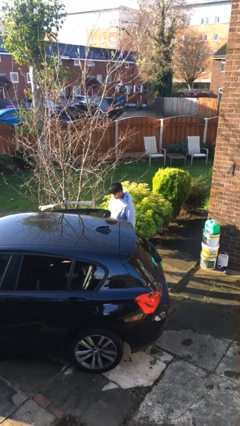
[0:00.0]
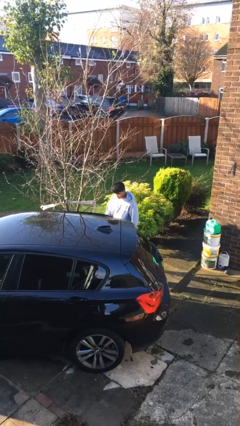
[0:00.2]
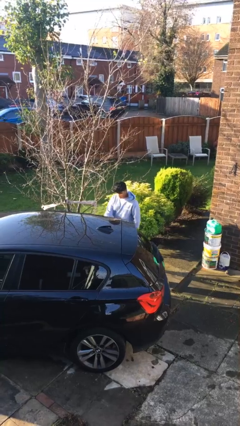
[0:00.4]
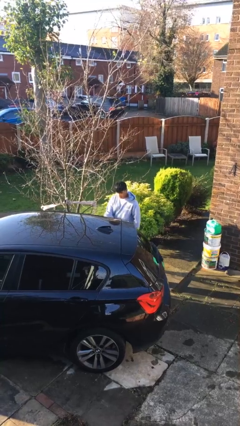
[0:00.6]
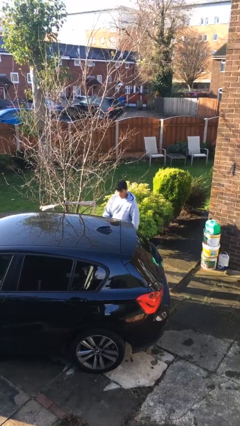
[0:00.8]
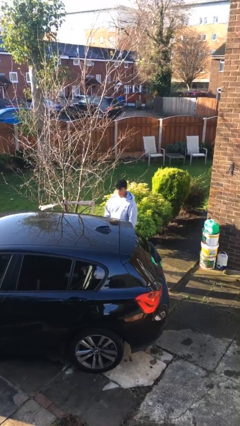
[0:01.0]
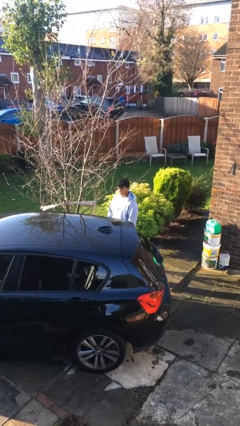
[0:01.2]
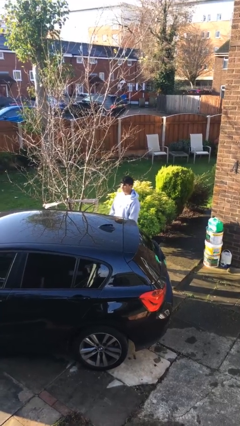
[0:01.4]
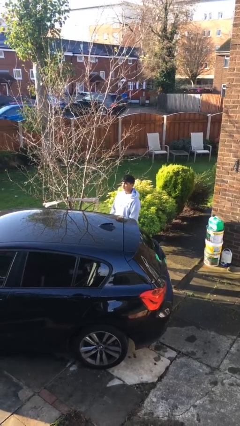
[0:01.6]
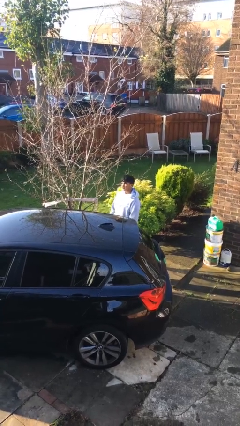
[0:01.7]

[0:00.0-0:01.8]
person closes car door

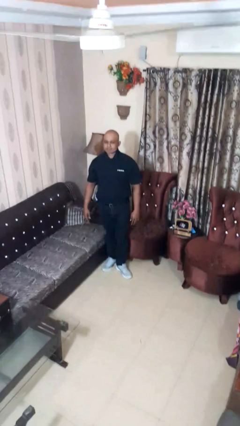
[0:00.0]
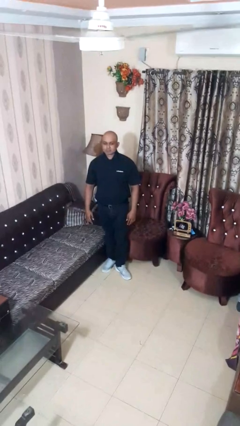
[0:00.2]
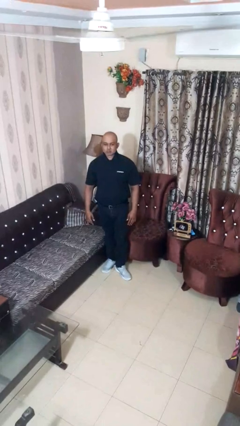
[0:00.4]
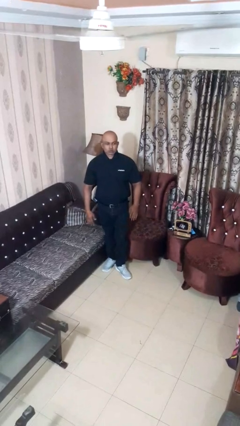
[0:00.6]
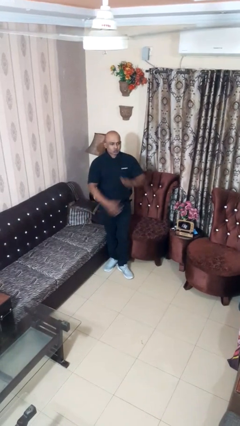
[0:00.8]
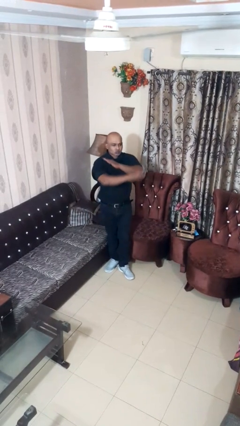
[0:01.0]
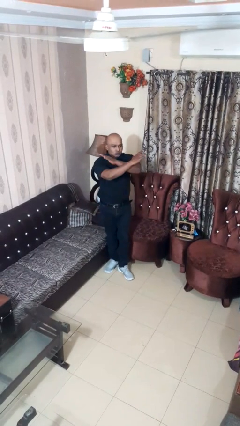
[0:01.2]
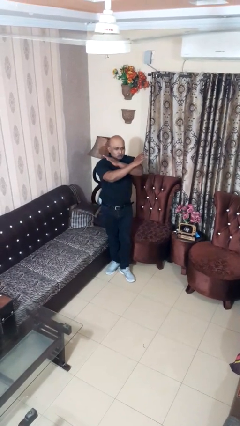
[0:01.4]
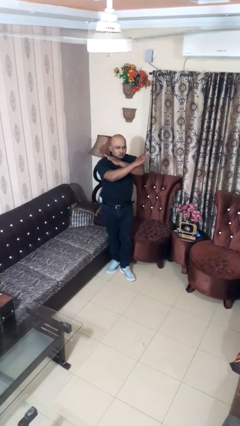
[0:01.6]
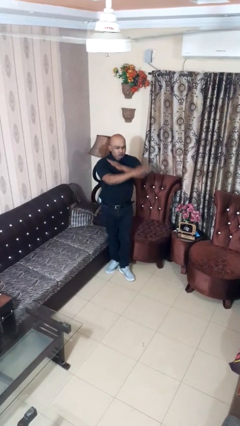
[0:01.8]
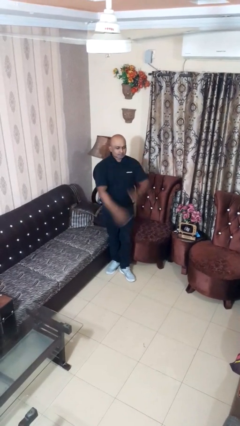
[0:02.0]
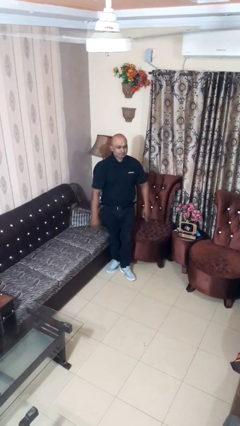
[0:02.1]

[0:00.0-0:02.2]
person gestures arms x

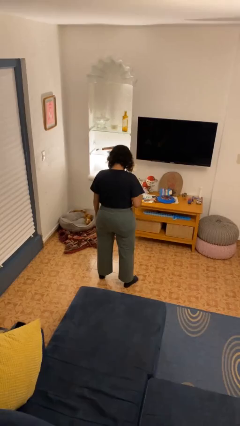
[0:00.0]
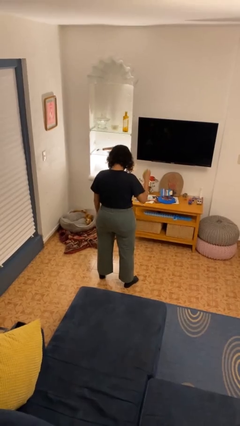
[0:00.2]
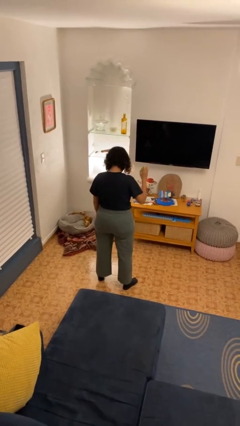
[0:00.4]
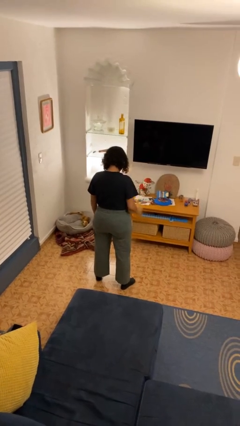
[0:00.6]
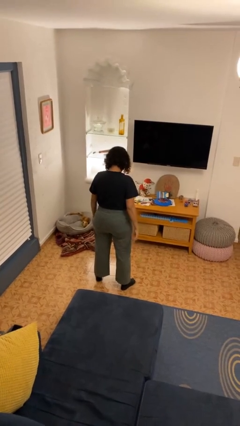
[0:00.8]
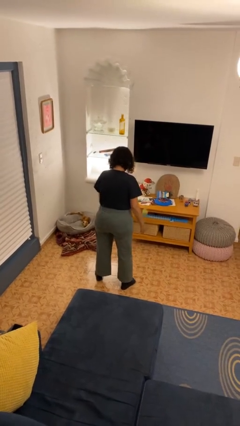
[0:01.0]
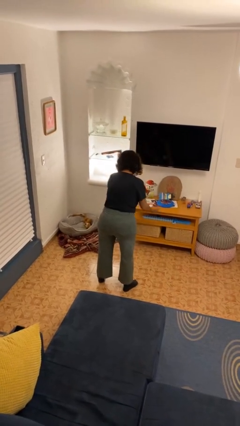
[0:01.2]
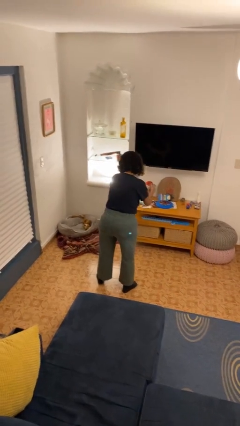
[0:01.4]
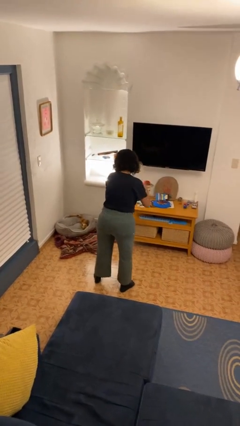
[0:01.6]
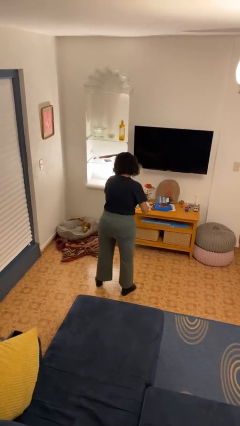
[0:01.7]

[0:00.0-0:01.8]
person bounces ball on floor

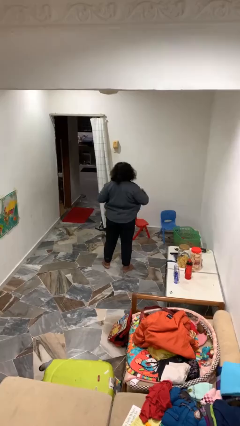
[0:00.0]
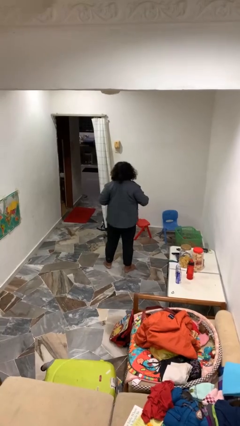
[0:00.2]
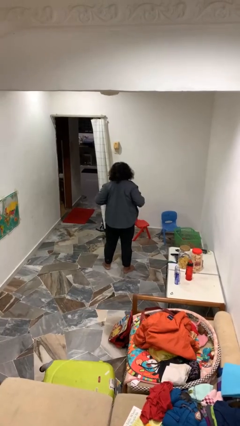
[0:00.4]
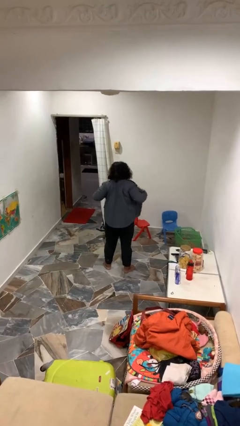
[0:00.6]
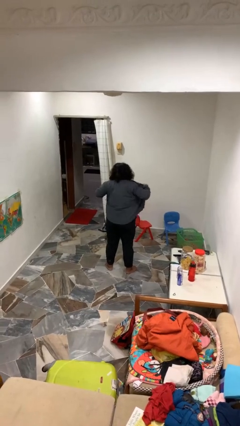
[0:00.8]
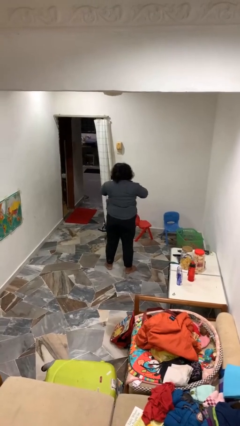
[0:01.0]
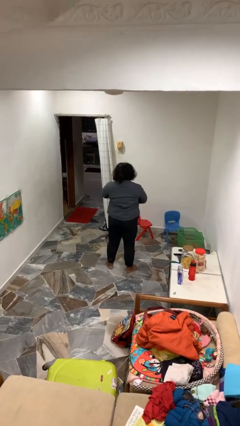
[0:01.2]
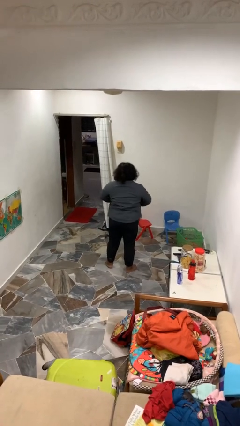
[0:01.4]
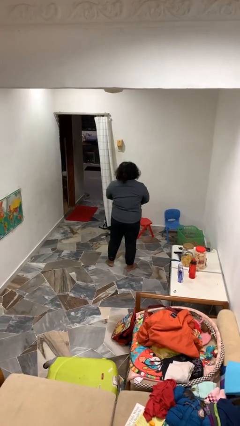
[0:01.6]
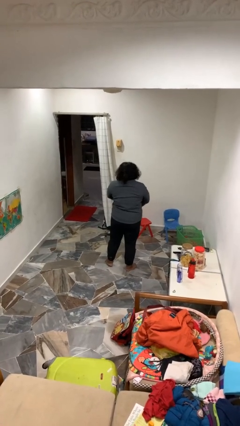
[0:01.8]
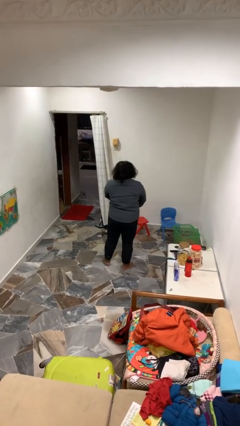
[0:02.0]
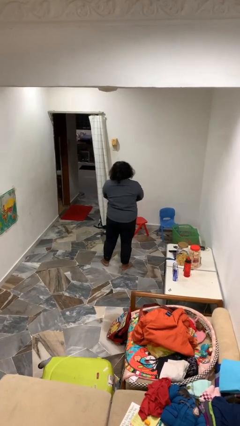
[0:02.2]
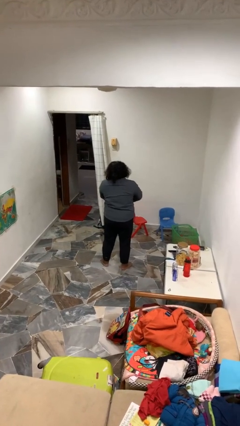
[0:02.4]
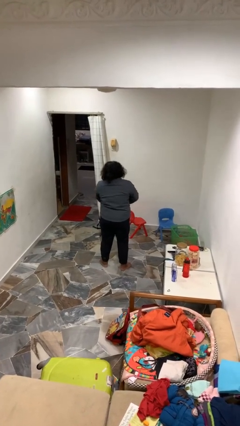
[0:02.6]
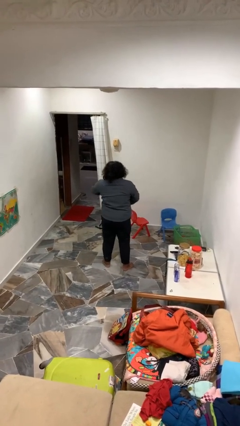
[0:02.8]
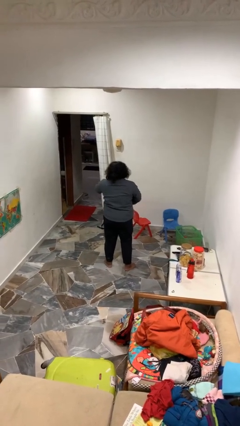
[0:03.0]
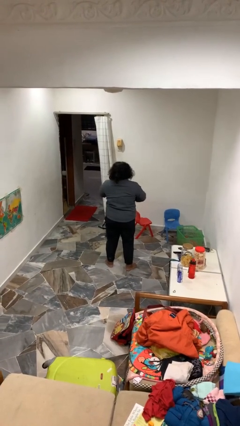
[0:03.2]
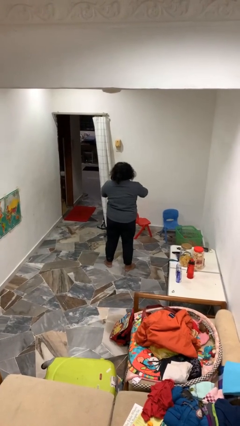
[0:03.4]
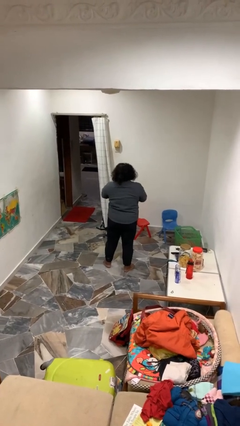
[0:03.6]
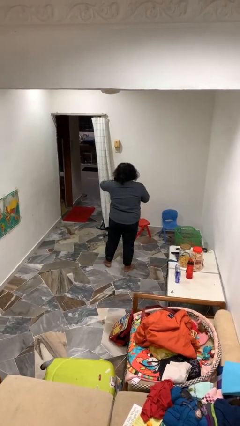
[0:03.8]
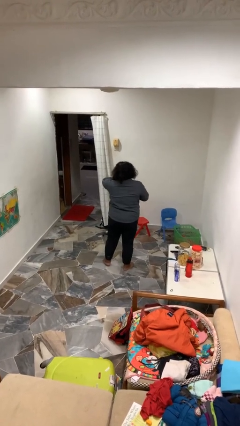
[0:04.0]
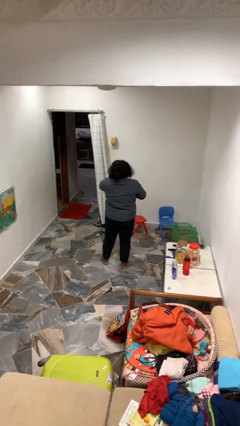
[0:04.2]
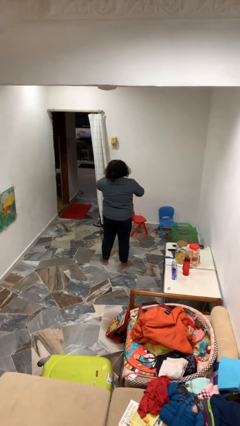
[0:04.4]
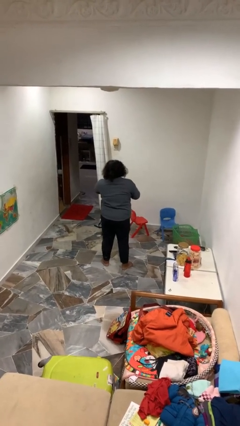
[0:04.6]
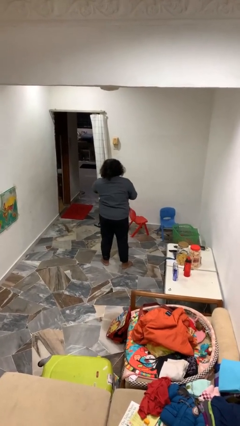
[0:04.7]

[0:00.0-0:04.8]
person buttons shirt

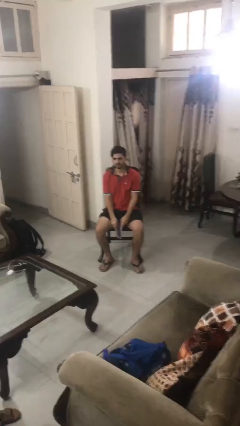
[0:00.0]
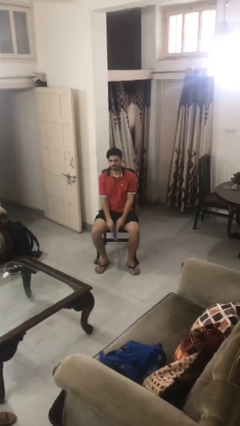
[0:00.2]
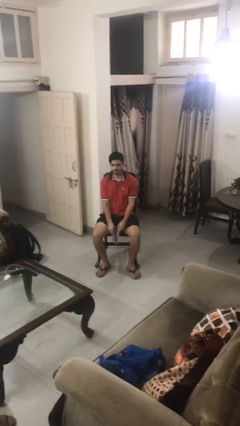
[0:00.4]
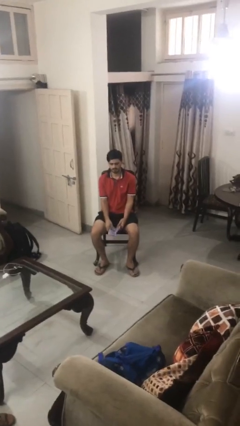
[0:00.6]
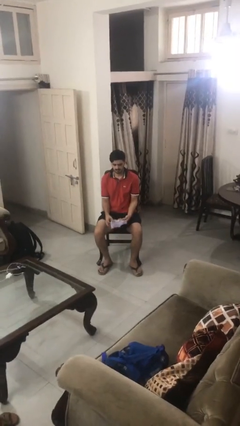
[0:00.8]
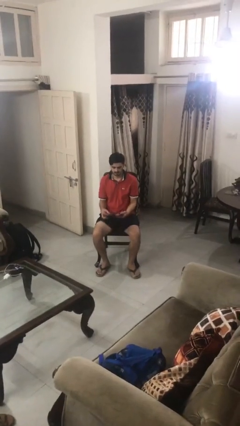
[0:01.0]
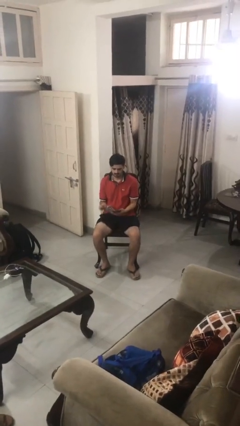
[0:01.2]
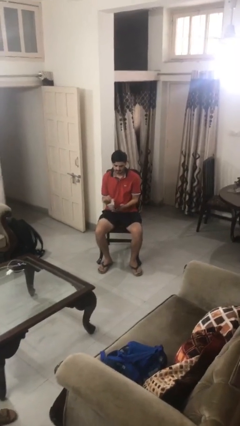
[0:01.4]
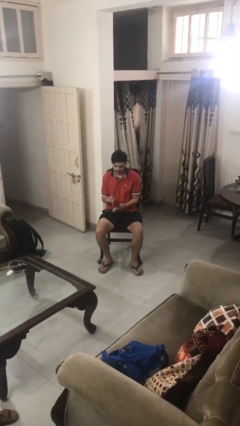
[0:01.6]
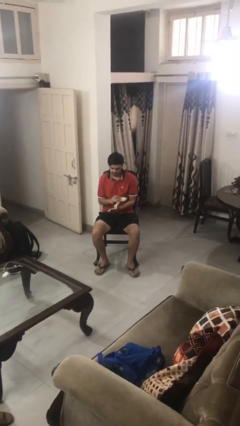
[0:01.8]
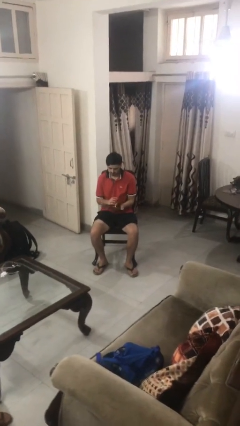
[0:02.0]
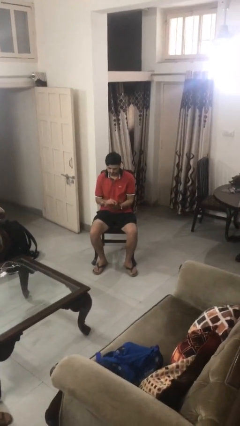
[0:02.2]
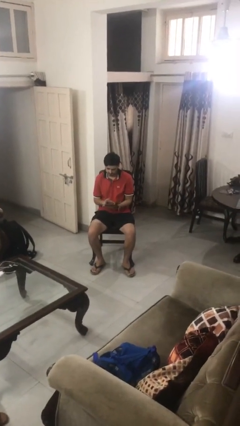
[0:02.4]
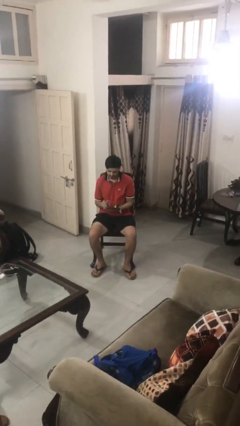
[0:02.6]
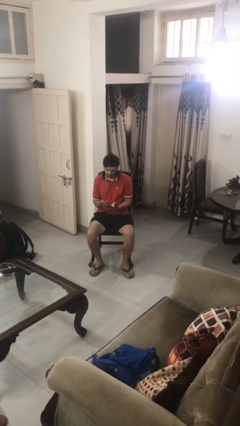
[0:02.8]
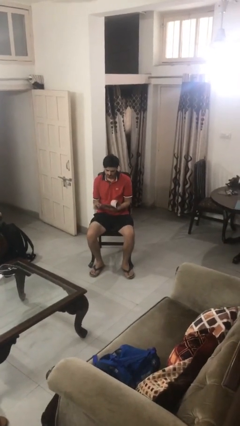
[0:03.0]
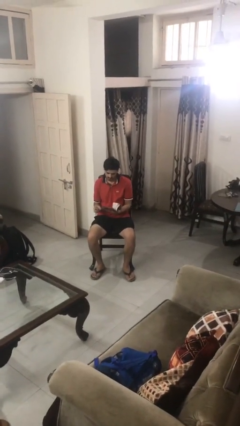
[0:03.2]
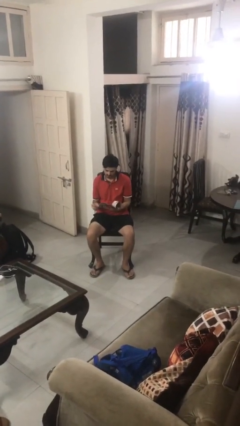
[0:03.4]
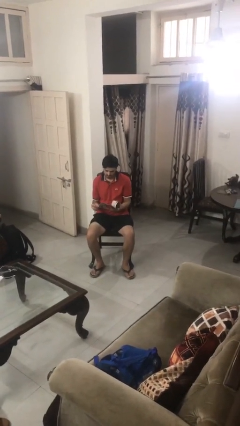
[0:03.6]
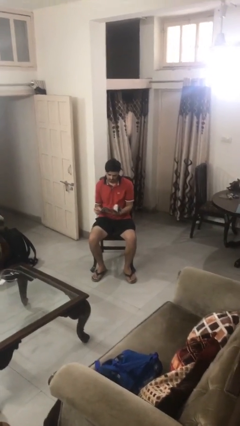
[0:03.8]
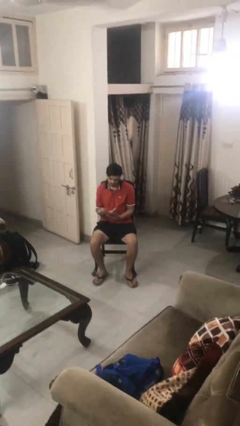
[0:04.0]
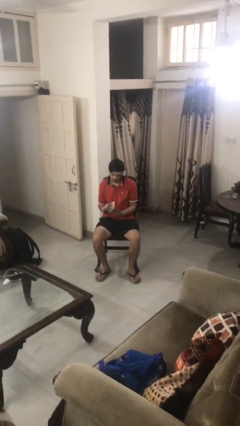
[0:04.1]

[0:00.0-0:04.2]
person reads magazine

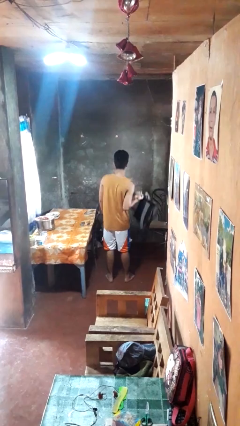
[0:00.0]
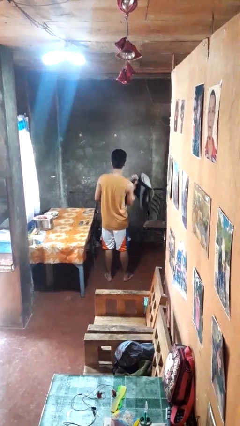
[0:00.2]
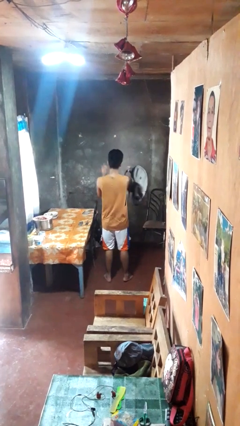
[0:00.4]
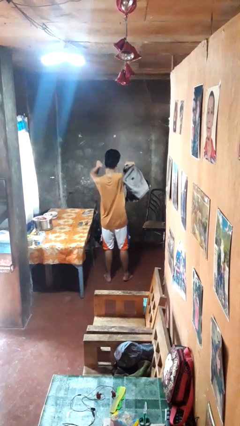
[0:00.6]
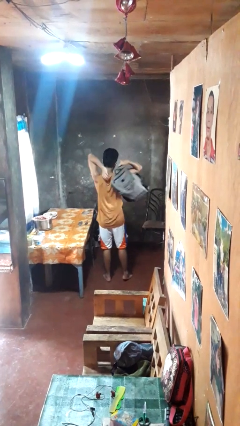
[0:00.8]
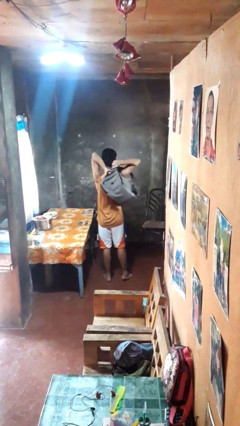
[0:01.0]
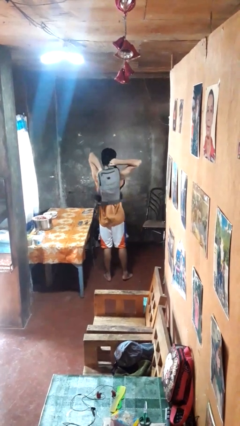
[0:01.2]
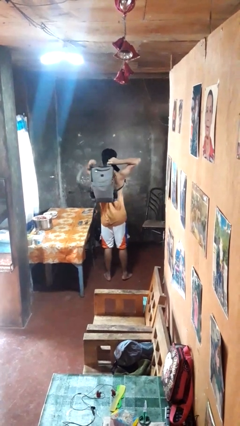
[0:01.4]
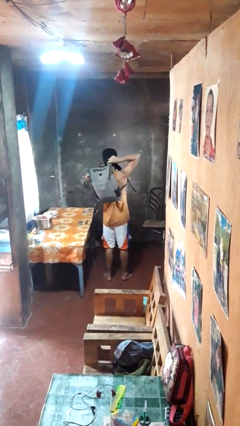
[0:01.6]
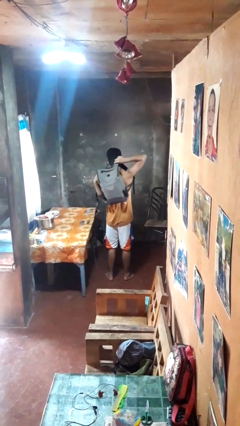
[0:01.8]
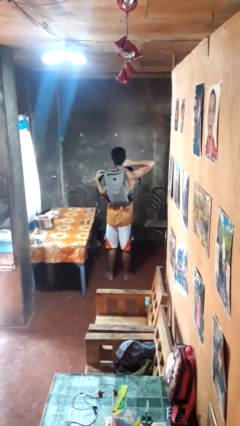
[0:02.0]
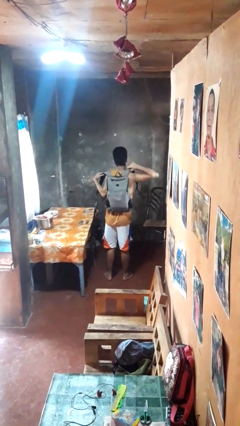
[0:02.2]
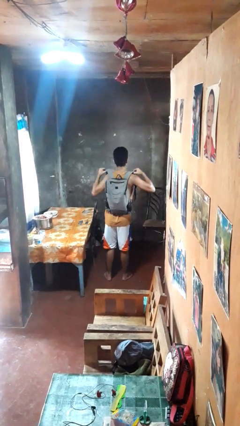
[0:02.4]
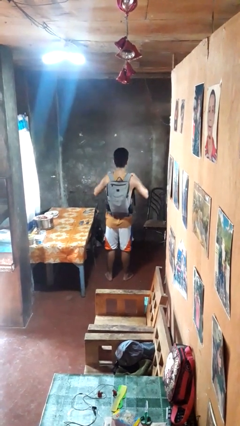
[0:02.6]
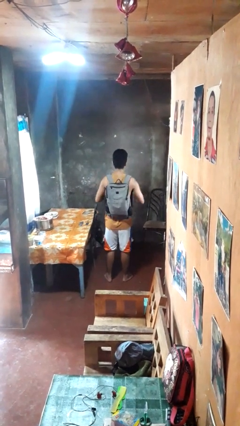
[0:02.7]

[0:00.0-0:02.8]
person puts on backpack
